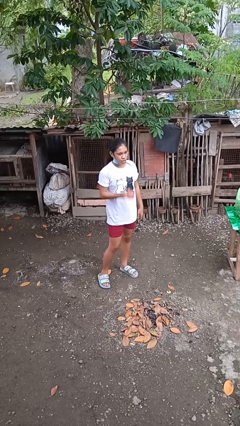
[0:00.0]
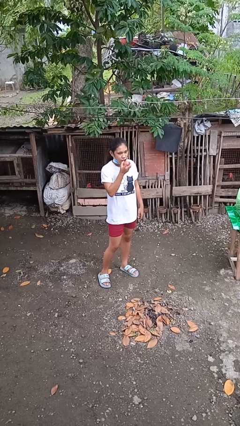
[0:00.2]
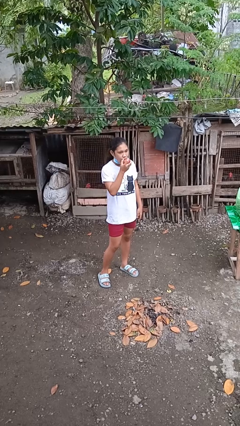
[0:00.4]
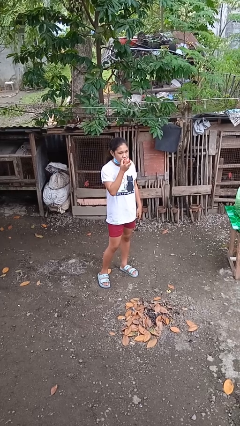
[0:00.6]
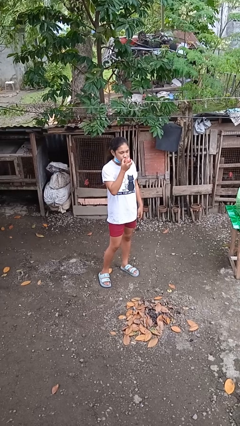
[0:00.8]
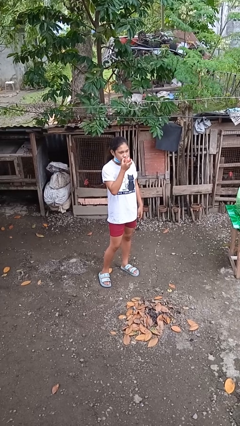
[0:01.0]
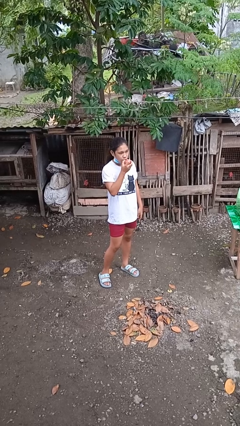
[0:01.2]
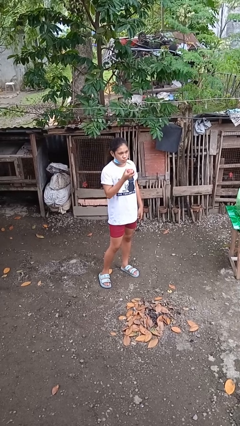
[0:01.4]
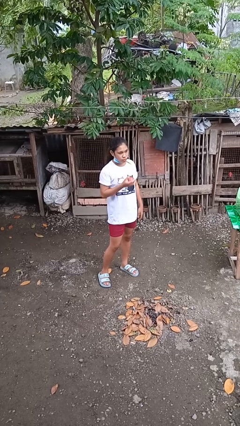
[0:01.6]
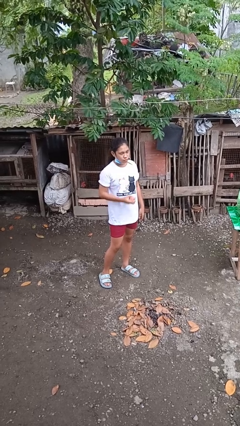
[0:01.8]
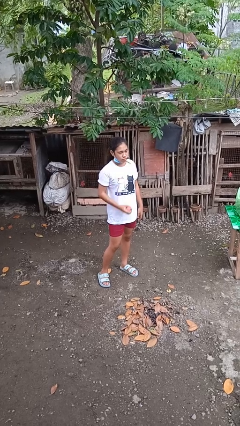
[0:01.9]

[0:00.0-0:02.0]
person eats apple

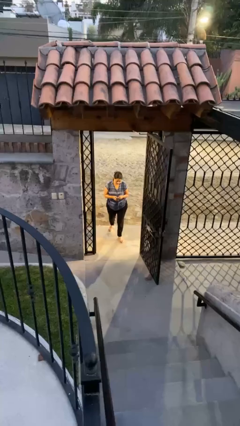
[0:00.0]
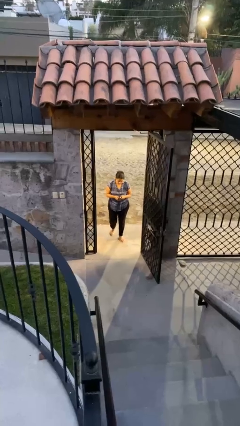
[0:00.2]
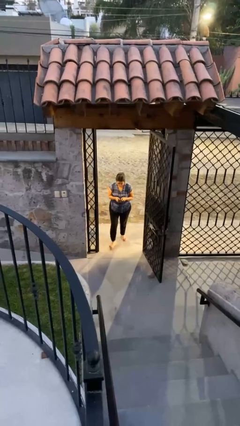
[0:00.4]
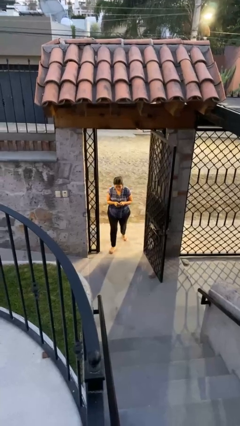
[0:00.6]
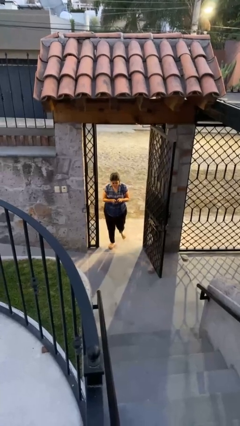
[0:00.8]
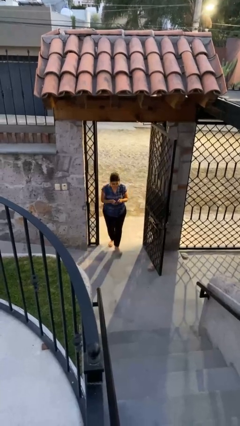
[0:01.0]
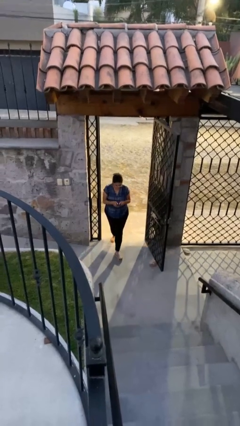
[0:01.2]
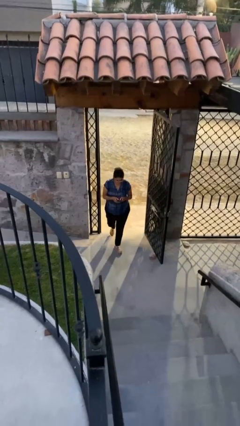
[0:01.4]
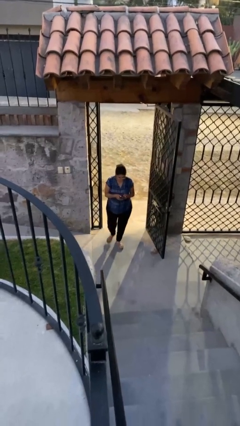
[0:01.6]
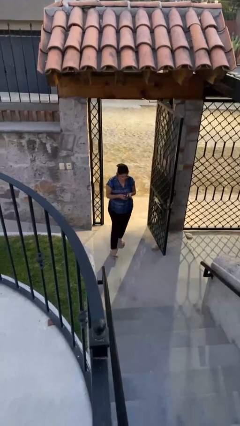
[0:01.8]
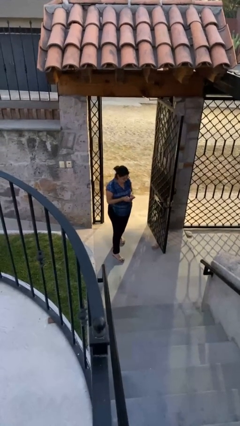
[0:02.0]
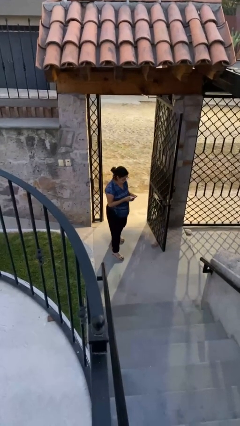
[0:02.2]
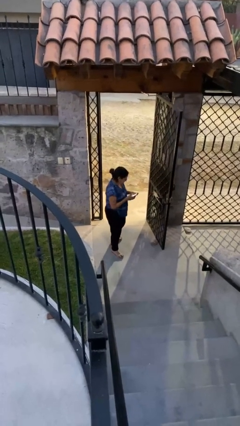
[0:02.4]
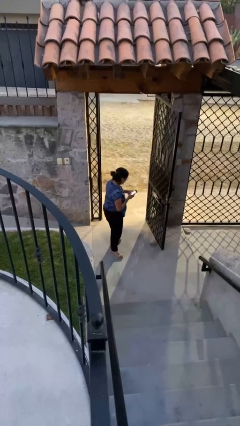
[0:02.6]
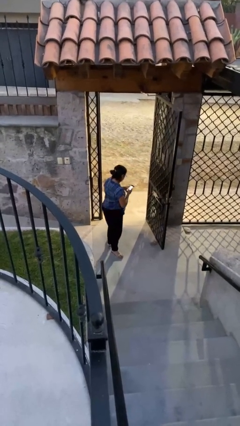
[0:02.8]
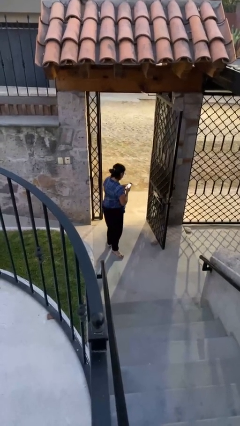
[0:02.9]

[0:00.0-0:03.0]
person enters scene through structure

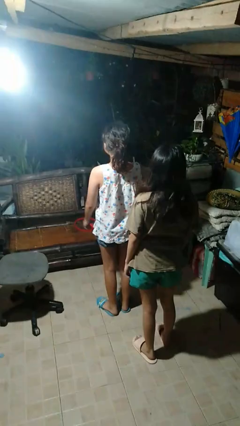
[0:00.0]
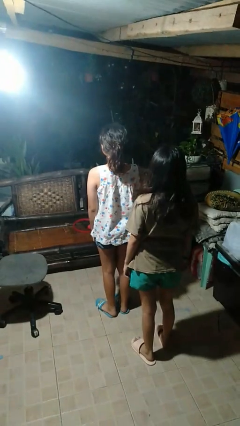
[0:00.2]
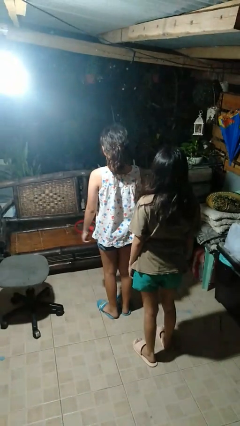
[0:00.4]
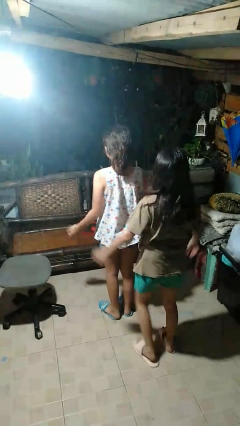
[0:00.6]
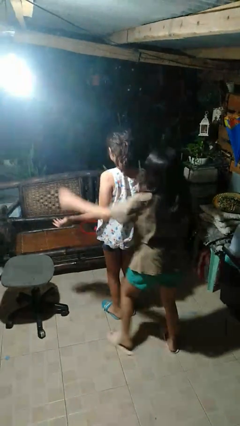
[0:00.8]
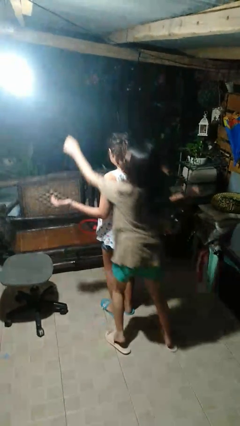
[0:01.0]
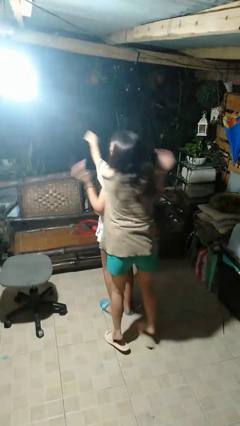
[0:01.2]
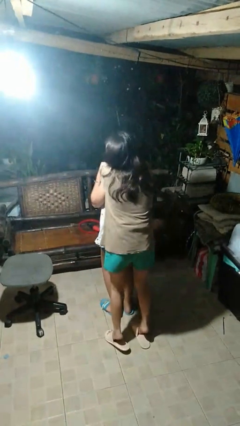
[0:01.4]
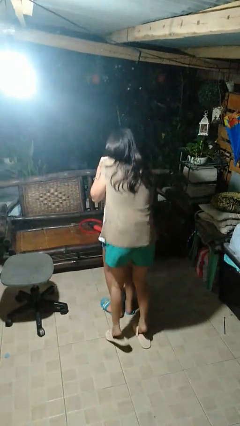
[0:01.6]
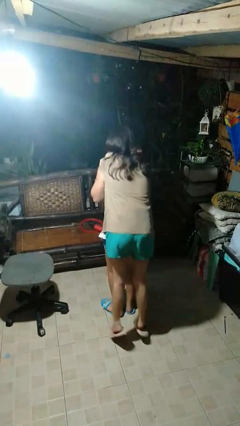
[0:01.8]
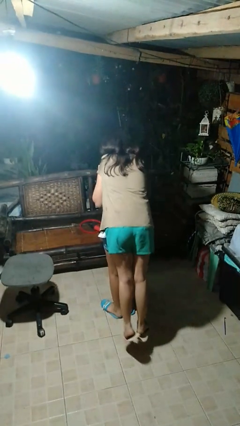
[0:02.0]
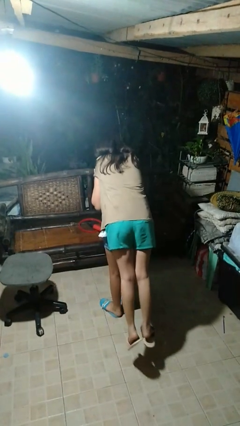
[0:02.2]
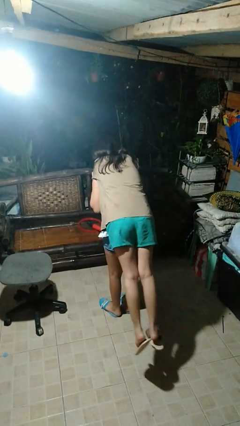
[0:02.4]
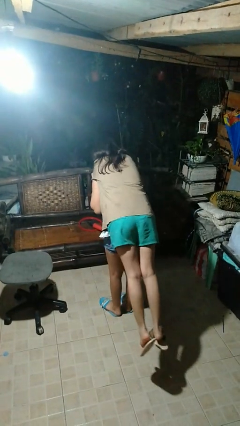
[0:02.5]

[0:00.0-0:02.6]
person carries person on back

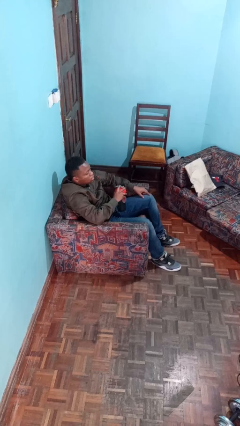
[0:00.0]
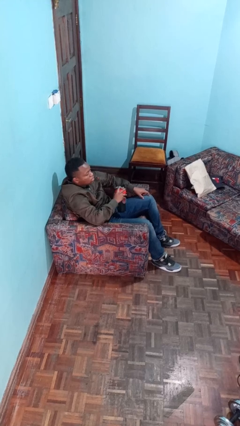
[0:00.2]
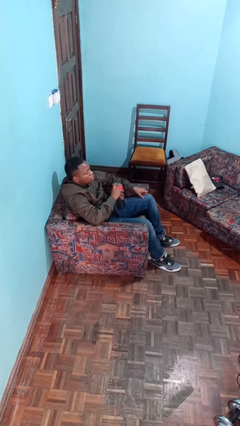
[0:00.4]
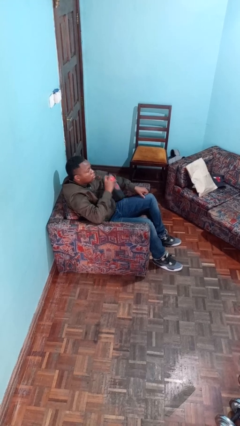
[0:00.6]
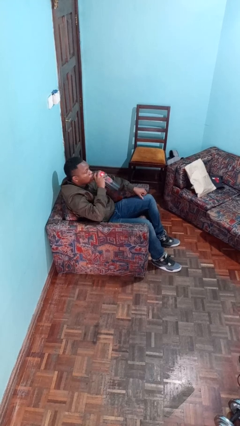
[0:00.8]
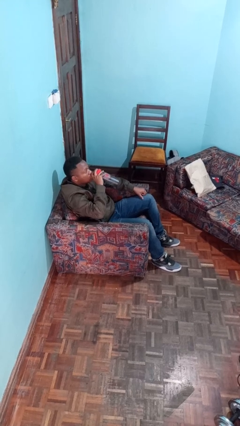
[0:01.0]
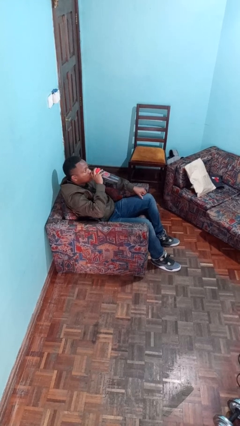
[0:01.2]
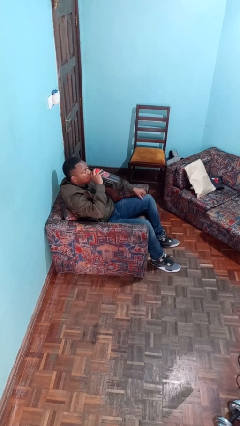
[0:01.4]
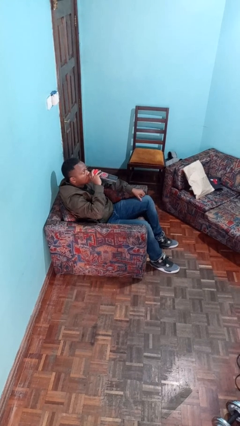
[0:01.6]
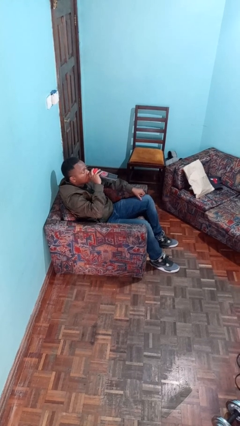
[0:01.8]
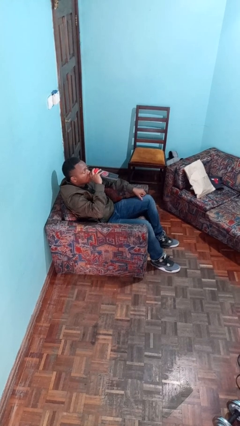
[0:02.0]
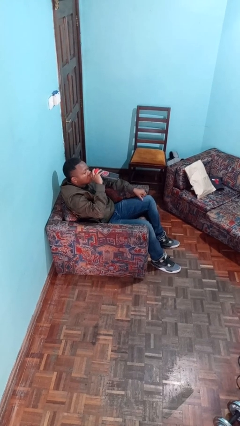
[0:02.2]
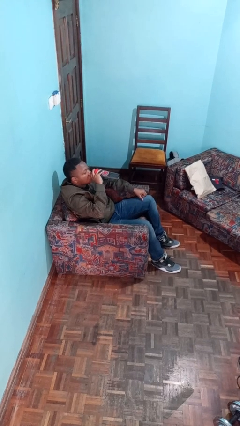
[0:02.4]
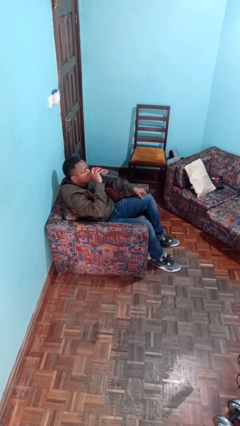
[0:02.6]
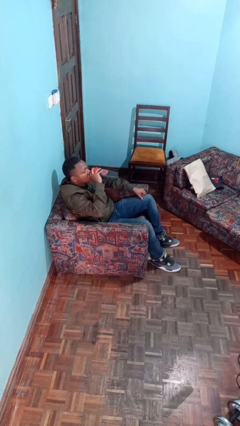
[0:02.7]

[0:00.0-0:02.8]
person drinks from bottle

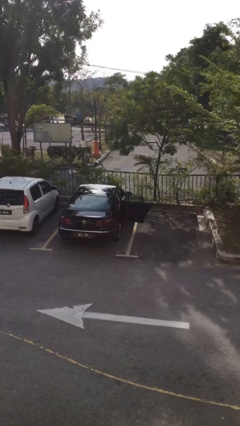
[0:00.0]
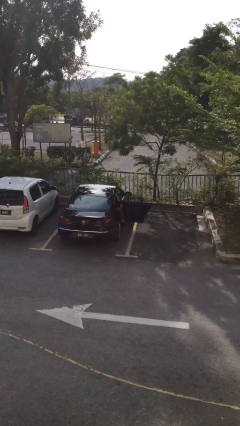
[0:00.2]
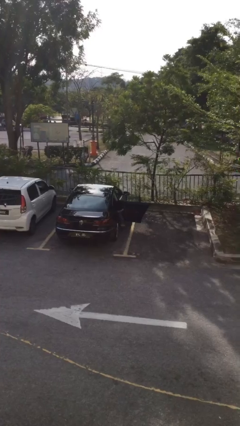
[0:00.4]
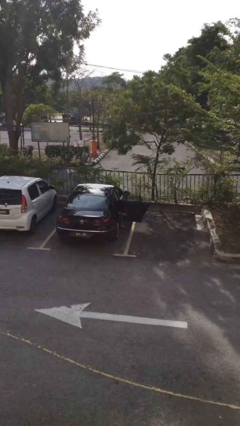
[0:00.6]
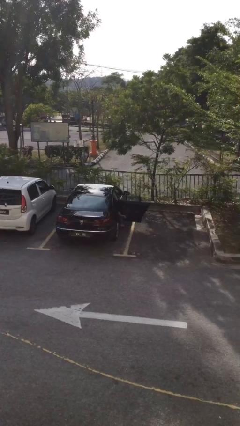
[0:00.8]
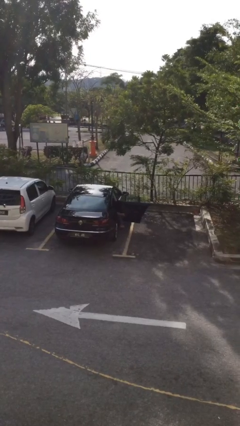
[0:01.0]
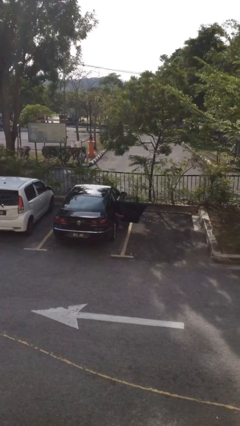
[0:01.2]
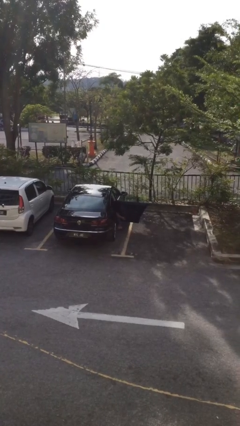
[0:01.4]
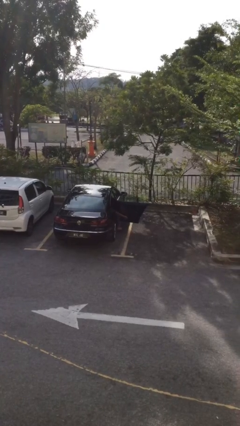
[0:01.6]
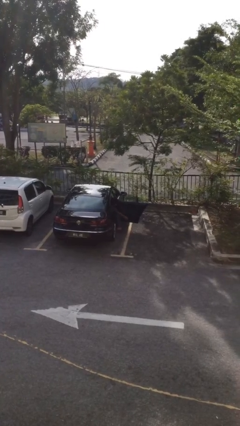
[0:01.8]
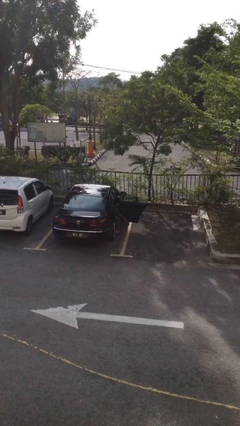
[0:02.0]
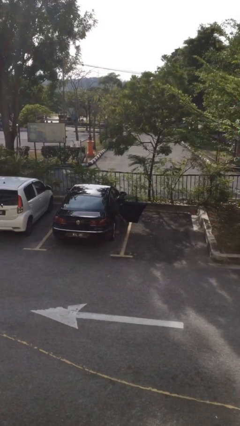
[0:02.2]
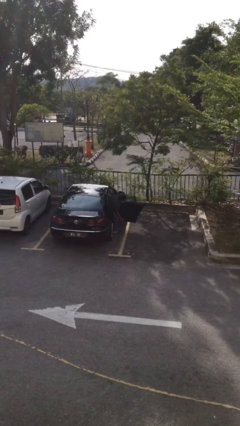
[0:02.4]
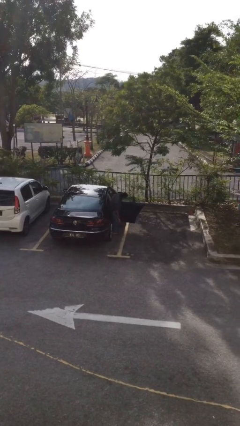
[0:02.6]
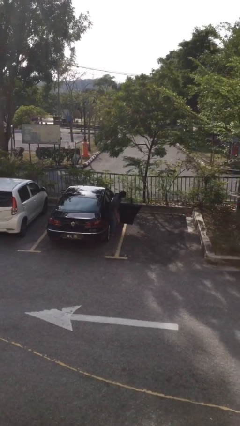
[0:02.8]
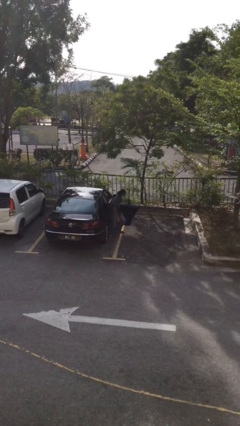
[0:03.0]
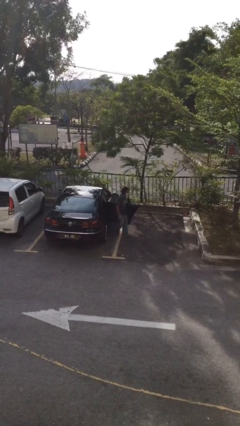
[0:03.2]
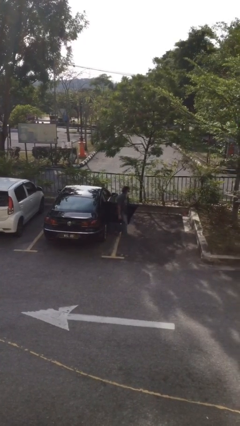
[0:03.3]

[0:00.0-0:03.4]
person exits car

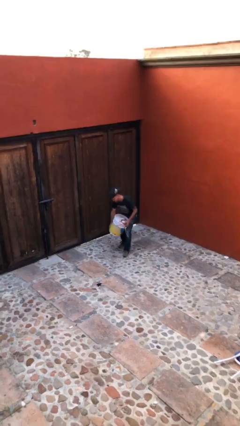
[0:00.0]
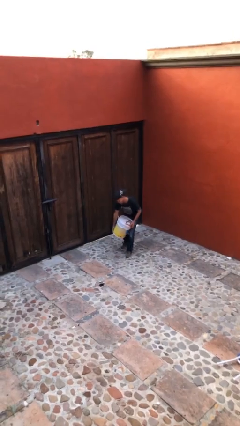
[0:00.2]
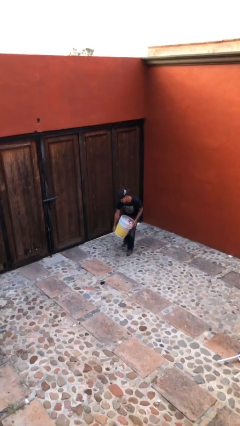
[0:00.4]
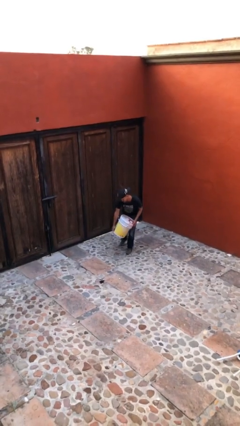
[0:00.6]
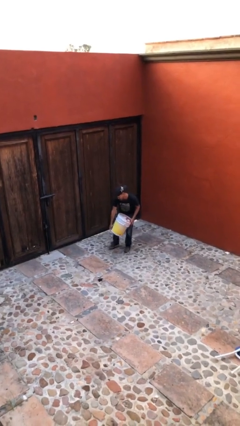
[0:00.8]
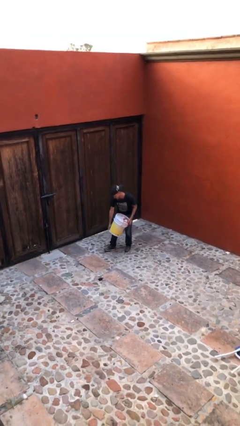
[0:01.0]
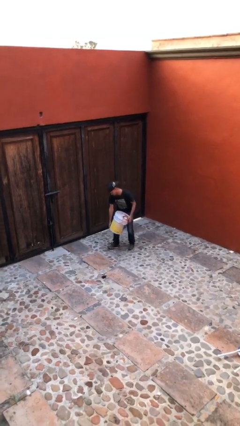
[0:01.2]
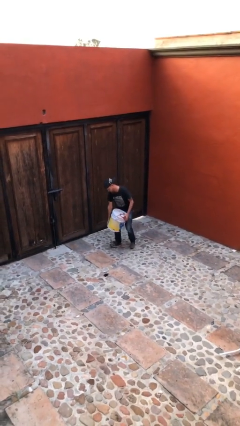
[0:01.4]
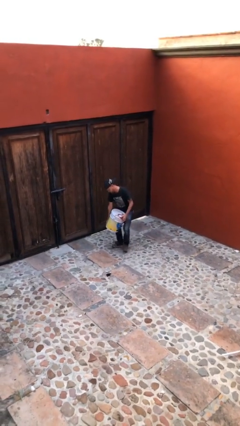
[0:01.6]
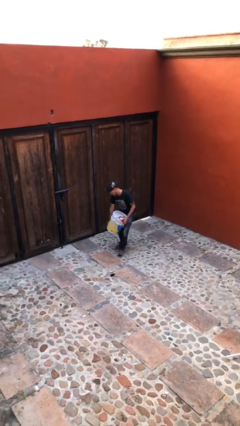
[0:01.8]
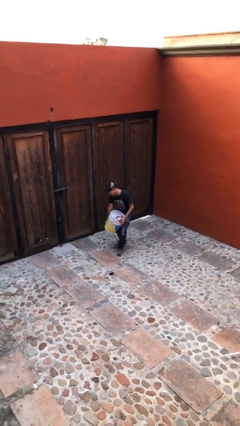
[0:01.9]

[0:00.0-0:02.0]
person carries heavy object

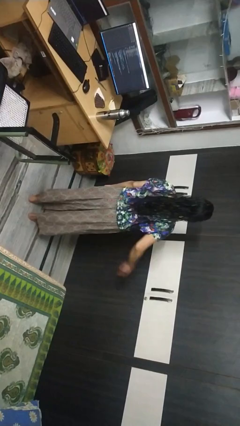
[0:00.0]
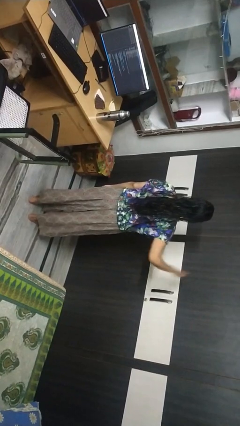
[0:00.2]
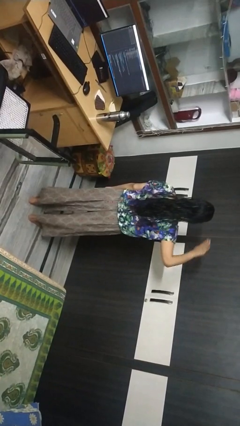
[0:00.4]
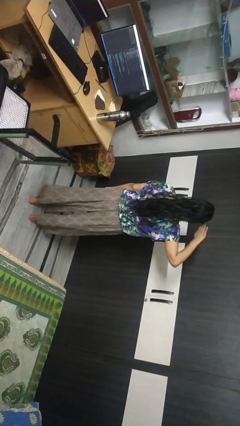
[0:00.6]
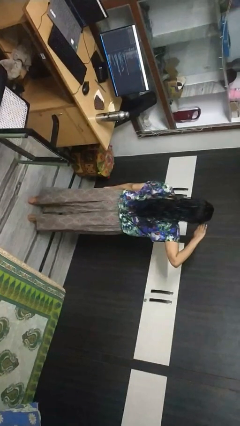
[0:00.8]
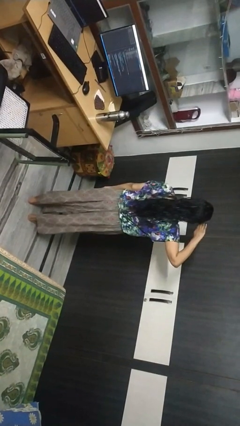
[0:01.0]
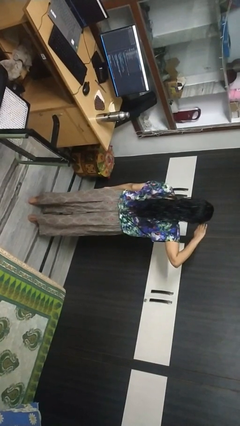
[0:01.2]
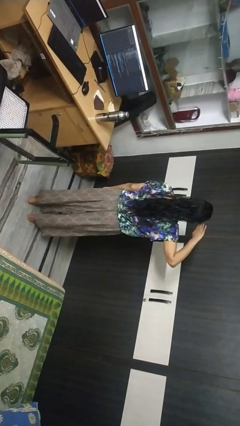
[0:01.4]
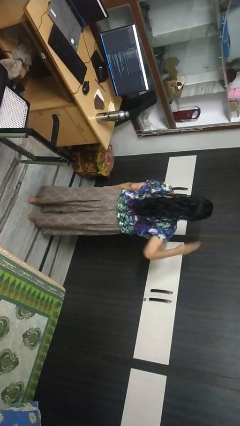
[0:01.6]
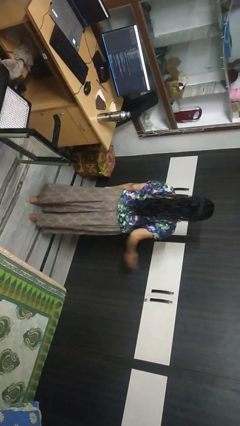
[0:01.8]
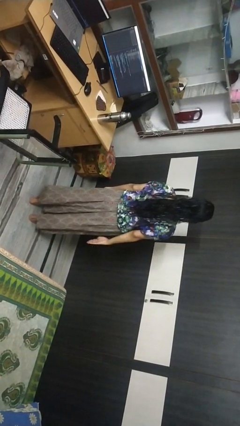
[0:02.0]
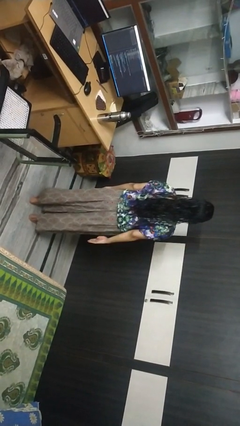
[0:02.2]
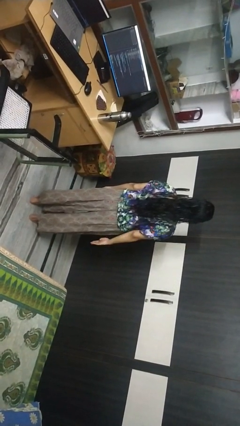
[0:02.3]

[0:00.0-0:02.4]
person salutes
